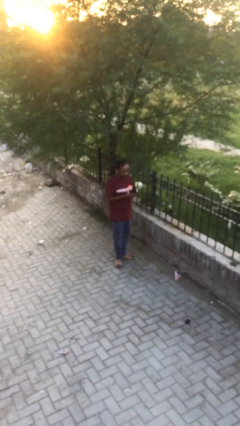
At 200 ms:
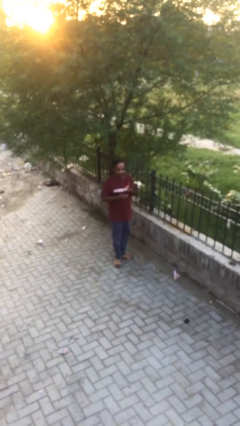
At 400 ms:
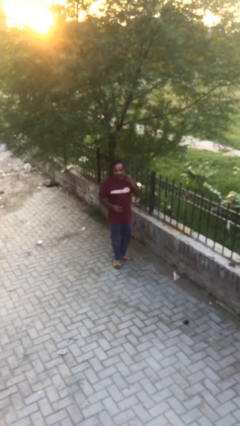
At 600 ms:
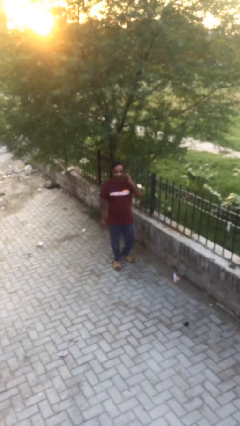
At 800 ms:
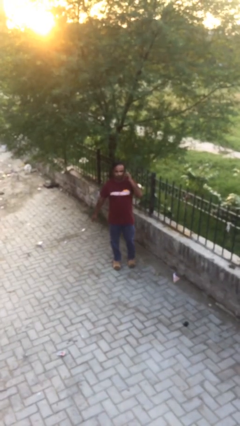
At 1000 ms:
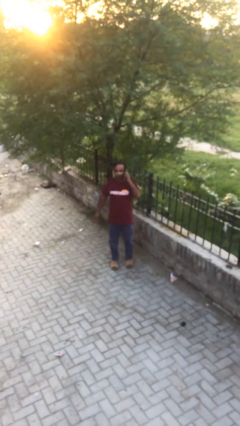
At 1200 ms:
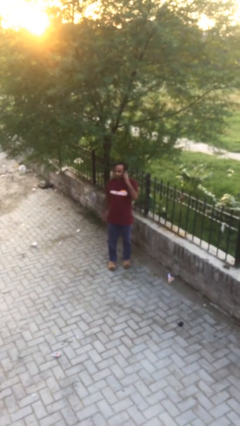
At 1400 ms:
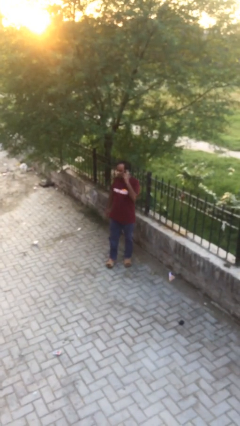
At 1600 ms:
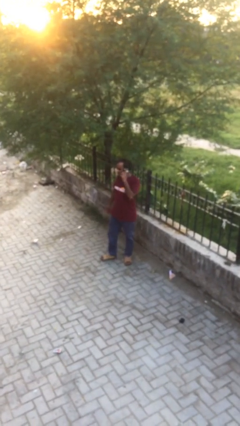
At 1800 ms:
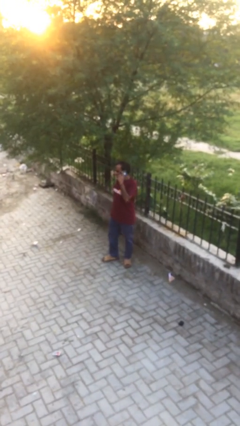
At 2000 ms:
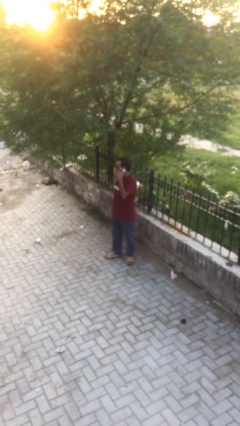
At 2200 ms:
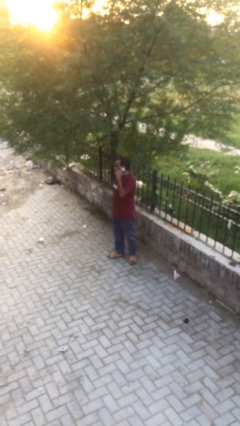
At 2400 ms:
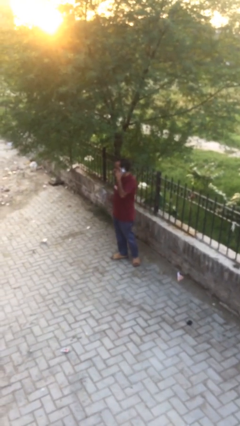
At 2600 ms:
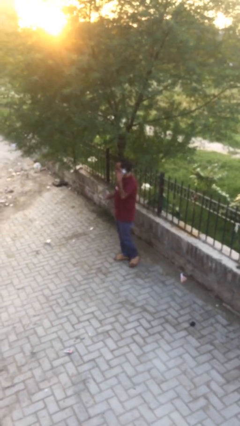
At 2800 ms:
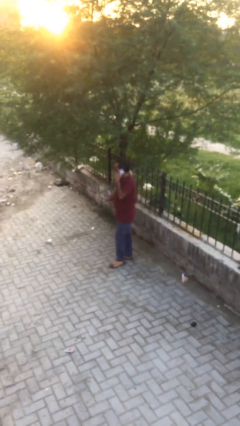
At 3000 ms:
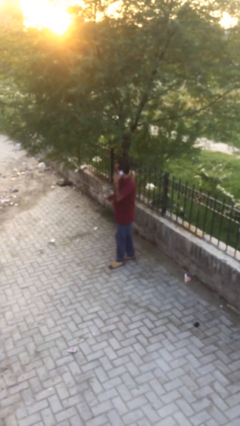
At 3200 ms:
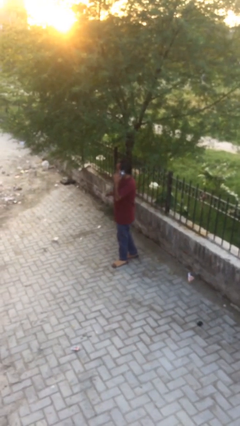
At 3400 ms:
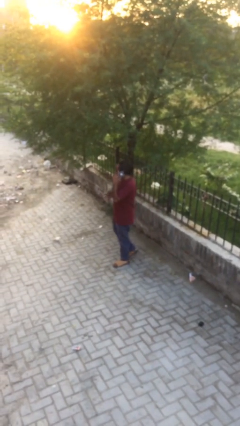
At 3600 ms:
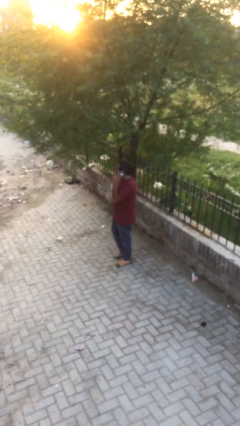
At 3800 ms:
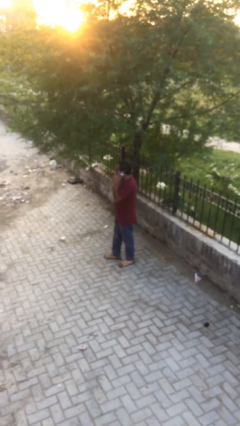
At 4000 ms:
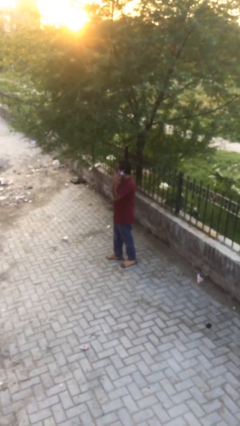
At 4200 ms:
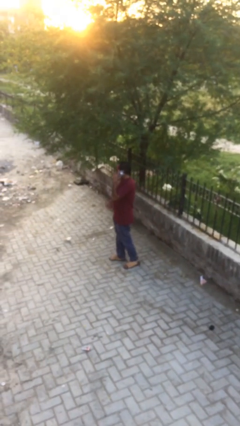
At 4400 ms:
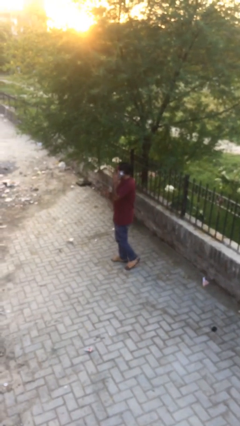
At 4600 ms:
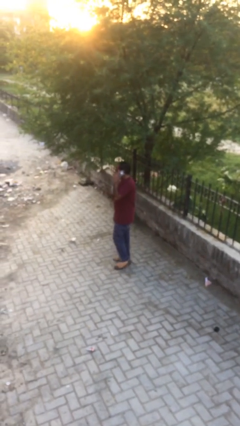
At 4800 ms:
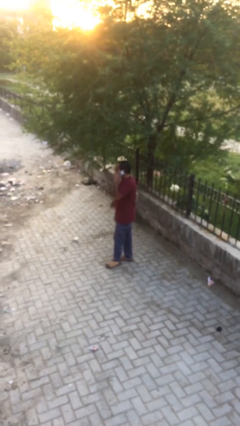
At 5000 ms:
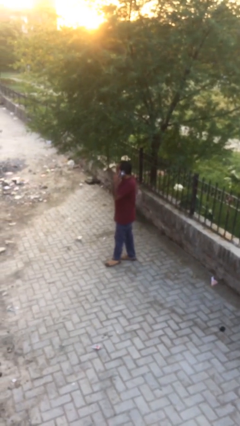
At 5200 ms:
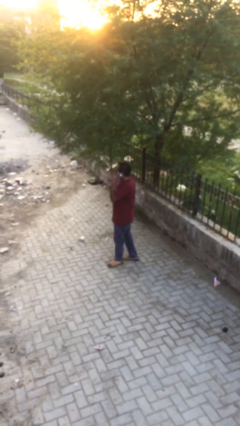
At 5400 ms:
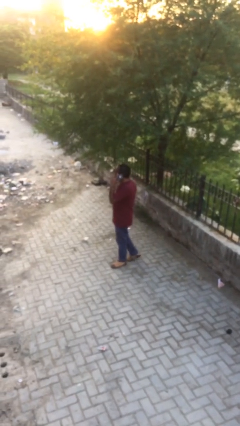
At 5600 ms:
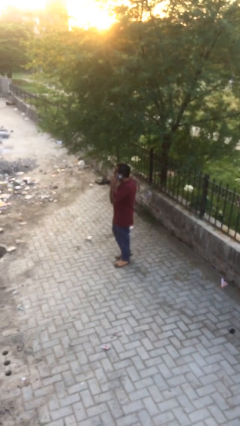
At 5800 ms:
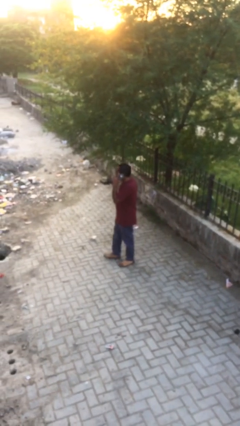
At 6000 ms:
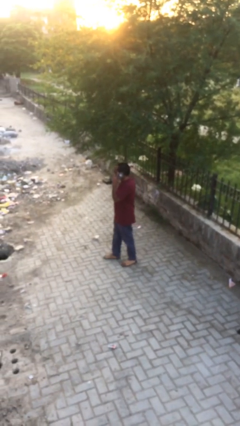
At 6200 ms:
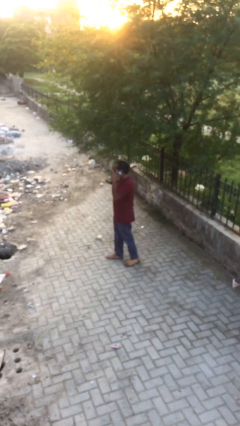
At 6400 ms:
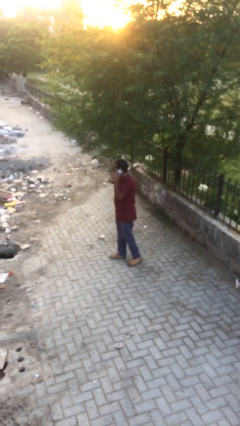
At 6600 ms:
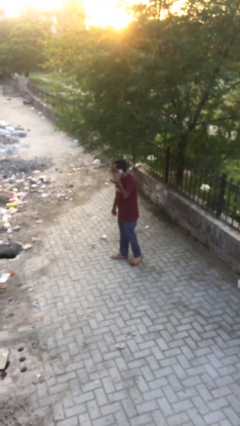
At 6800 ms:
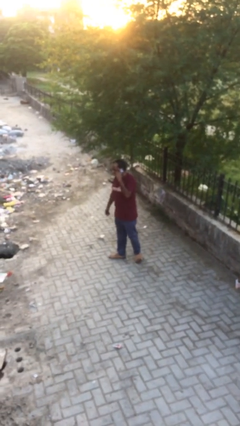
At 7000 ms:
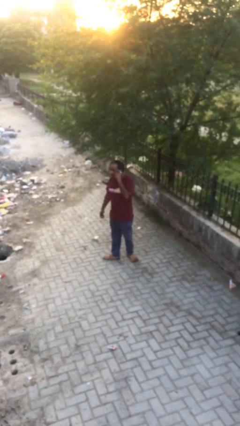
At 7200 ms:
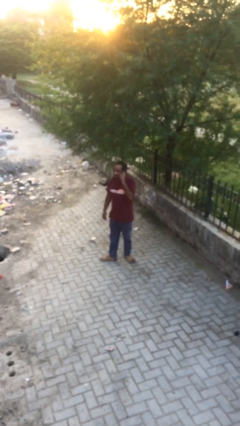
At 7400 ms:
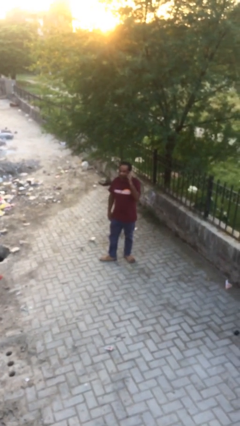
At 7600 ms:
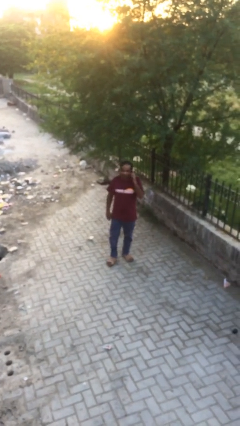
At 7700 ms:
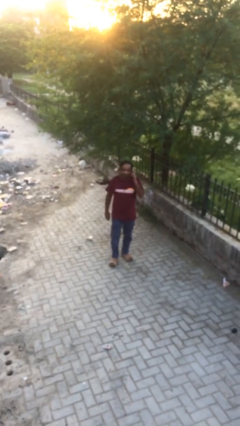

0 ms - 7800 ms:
person talks on phone

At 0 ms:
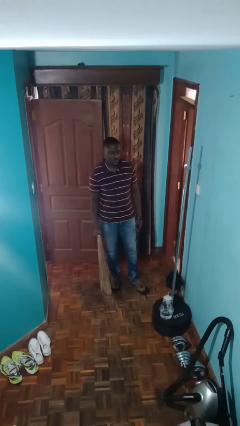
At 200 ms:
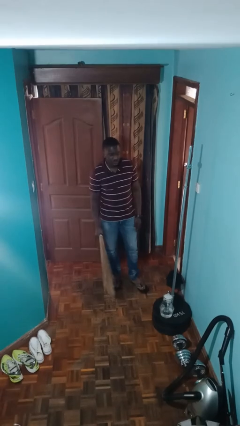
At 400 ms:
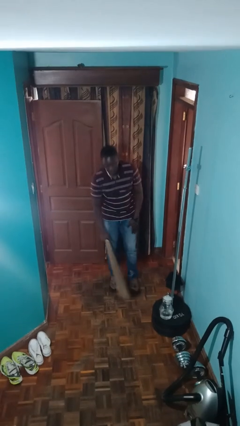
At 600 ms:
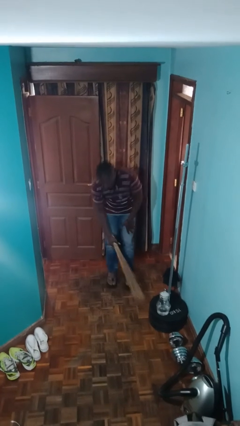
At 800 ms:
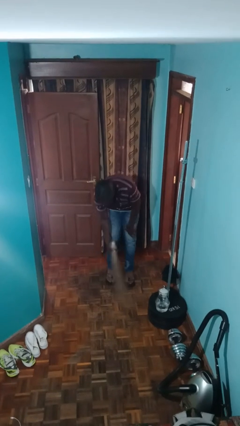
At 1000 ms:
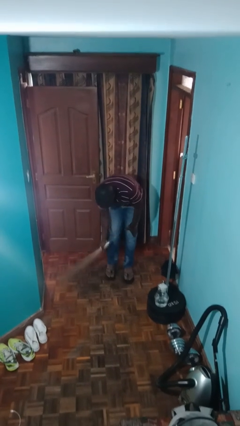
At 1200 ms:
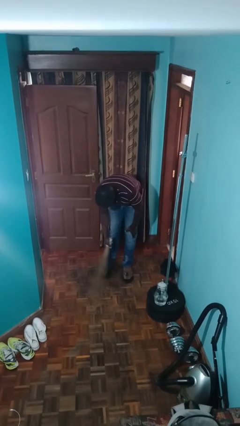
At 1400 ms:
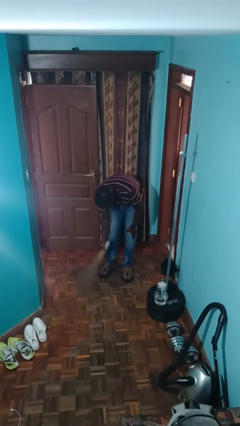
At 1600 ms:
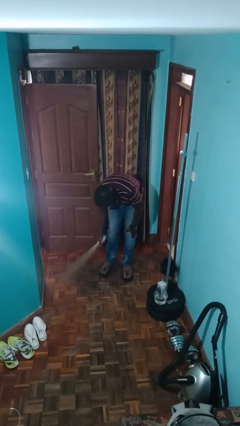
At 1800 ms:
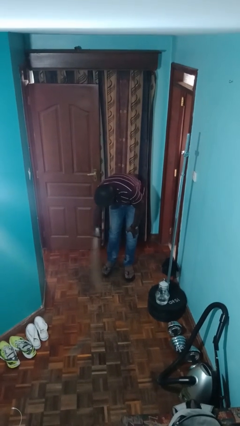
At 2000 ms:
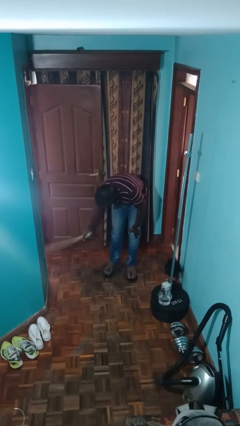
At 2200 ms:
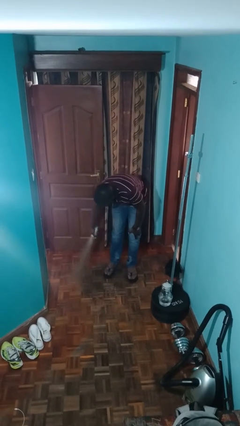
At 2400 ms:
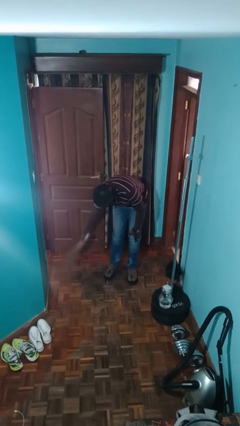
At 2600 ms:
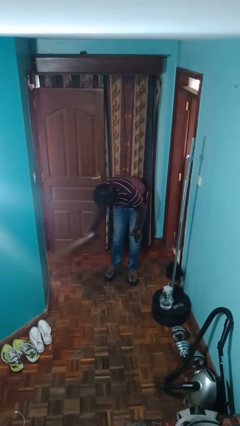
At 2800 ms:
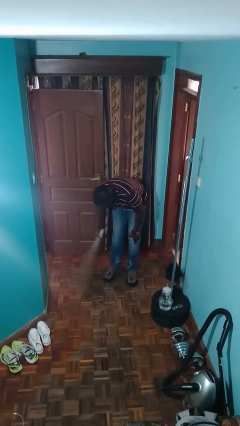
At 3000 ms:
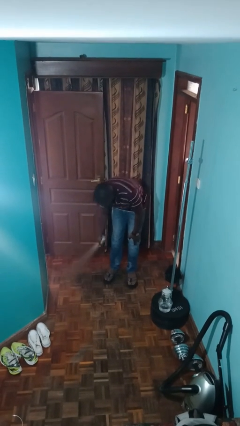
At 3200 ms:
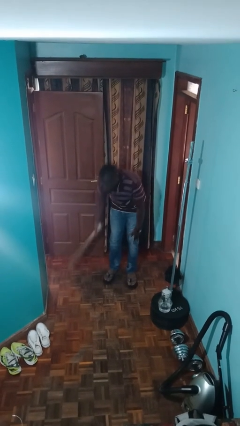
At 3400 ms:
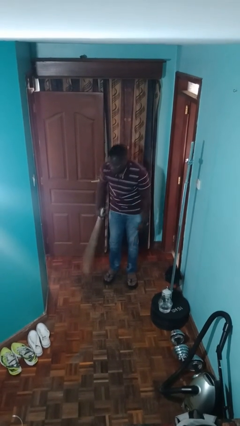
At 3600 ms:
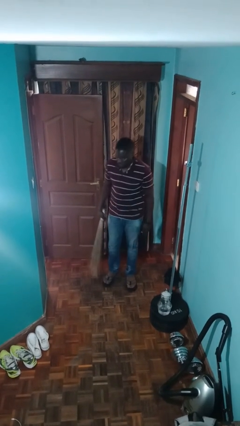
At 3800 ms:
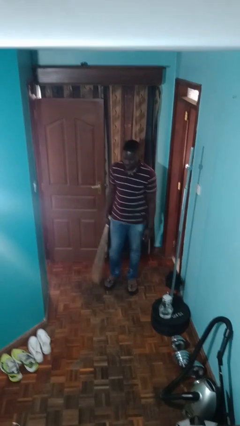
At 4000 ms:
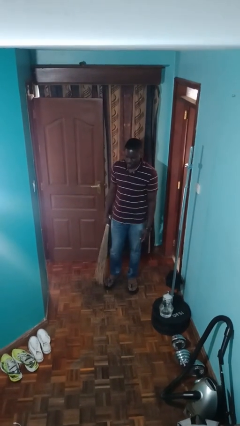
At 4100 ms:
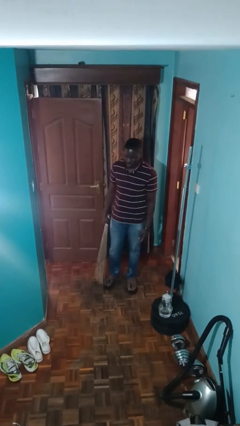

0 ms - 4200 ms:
person sweeps floor

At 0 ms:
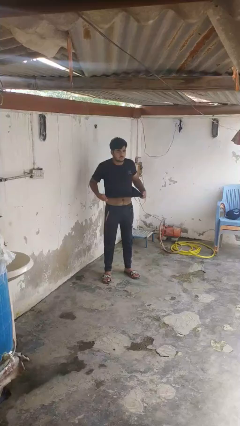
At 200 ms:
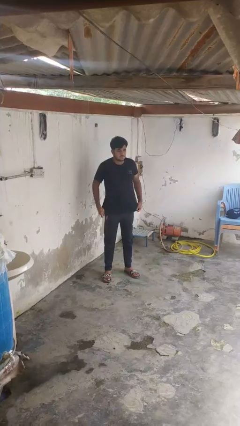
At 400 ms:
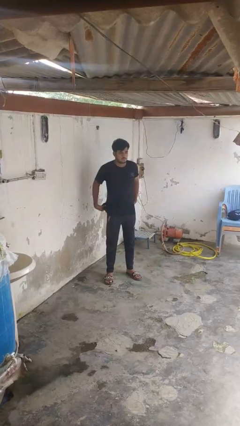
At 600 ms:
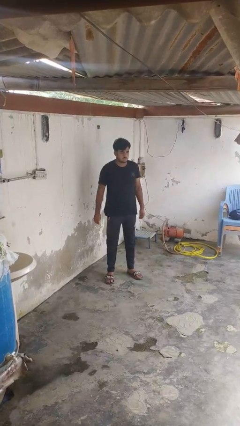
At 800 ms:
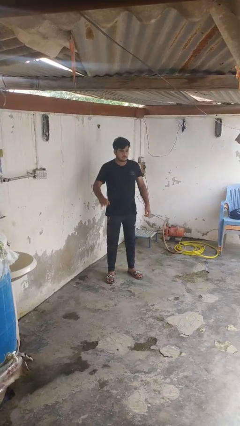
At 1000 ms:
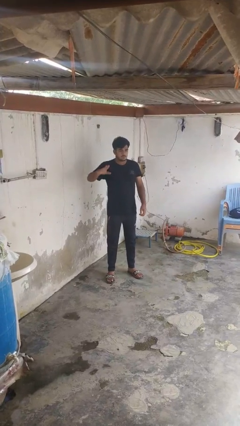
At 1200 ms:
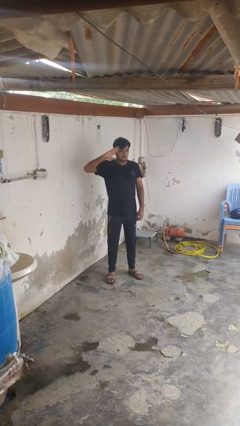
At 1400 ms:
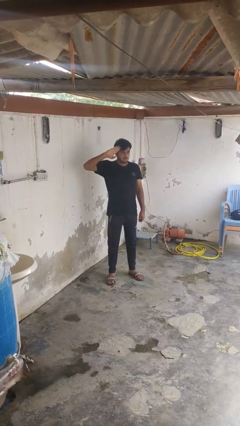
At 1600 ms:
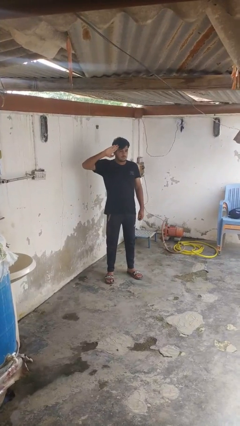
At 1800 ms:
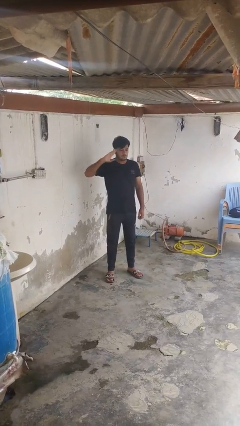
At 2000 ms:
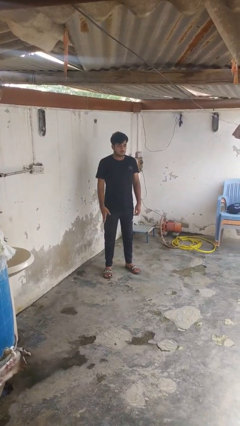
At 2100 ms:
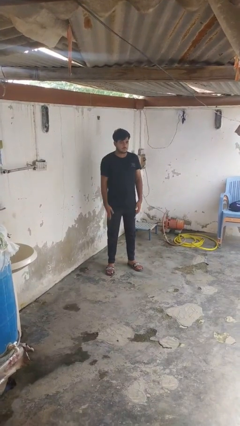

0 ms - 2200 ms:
person salutes

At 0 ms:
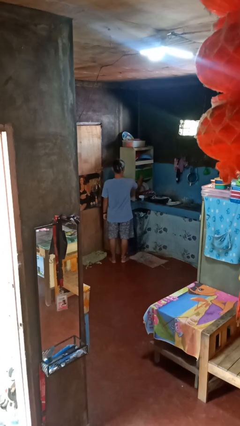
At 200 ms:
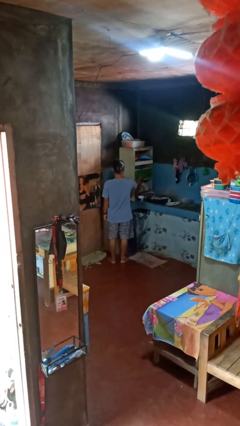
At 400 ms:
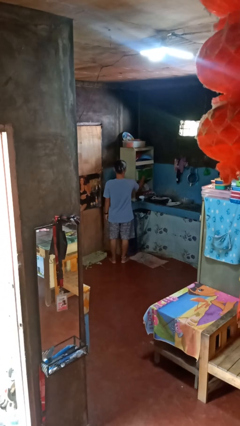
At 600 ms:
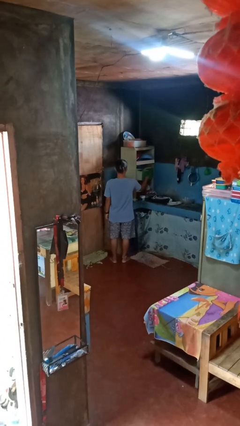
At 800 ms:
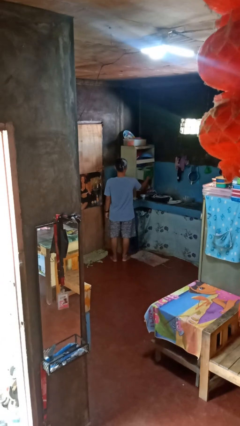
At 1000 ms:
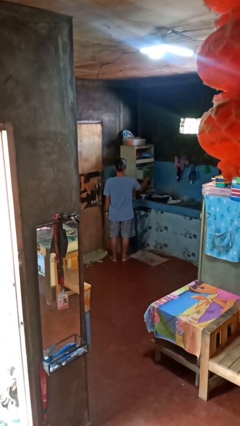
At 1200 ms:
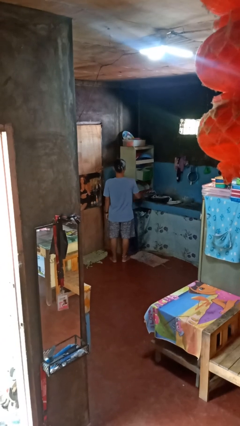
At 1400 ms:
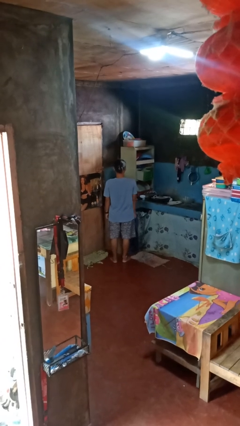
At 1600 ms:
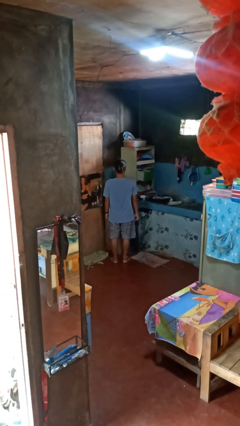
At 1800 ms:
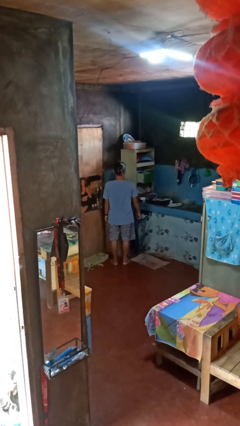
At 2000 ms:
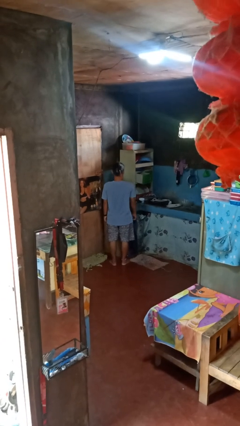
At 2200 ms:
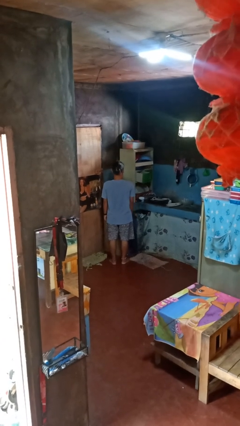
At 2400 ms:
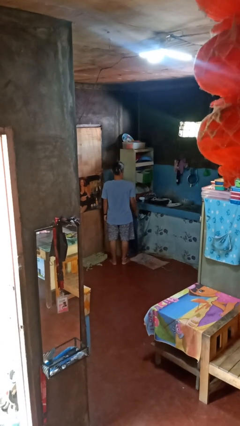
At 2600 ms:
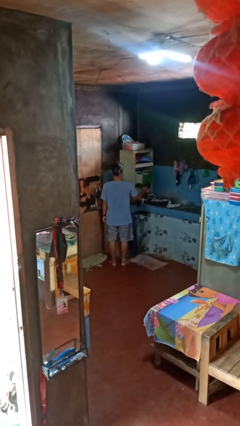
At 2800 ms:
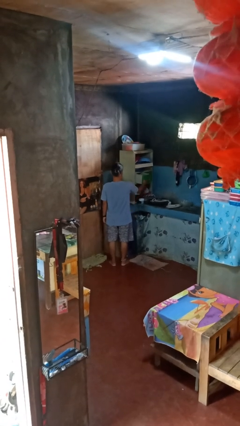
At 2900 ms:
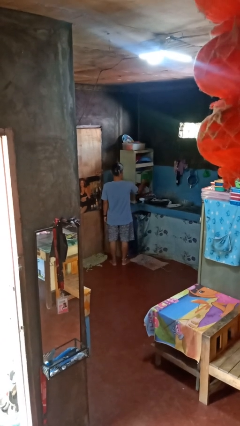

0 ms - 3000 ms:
person opens kitchen drawer
